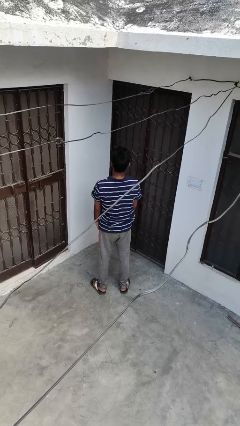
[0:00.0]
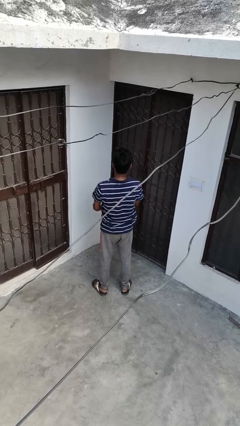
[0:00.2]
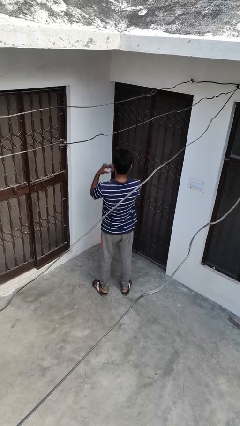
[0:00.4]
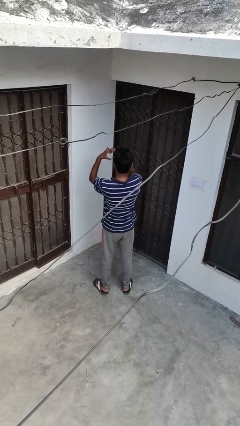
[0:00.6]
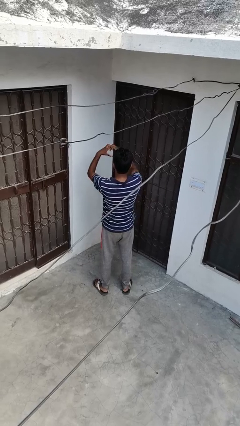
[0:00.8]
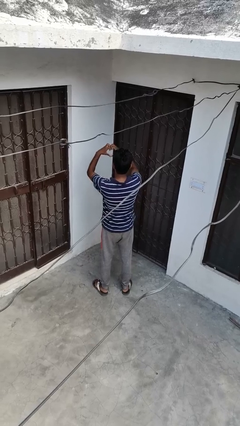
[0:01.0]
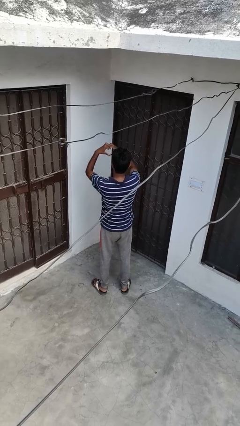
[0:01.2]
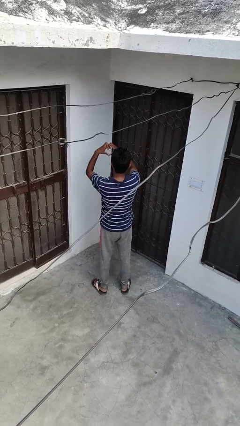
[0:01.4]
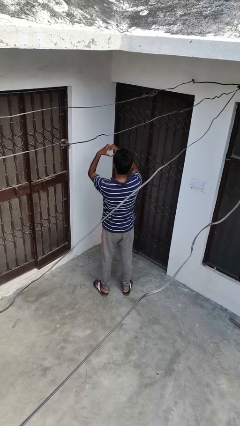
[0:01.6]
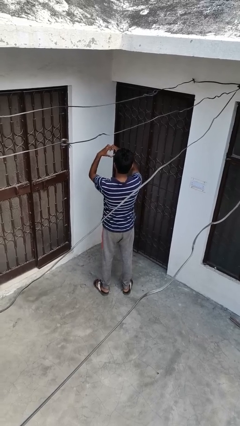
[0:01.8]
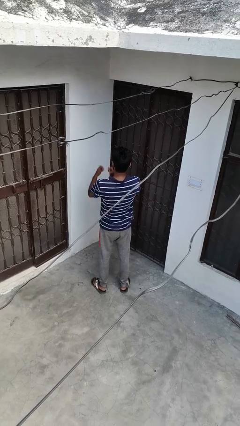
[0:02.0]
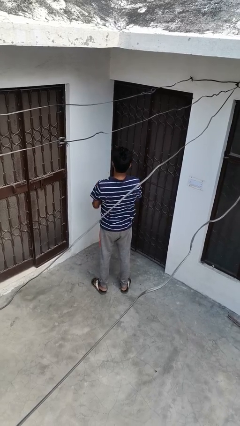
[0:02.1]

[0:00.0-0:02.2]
person gestures heart

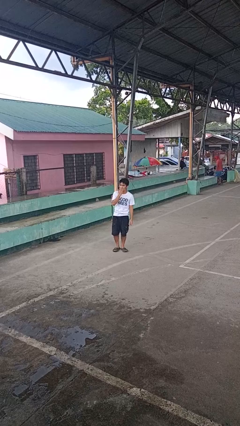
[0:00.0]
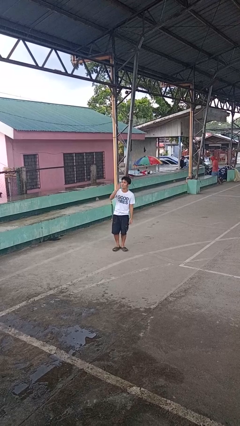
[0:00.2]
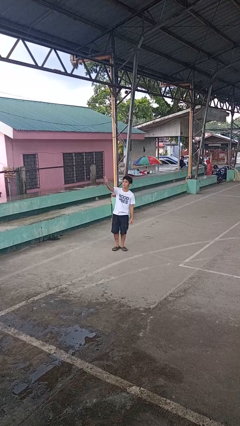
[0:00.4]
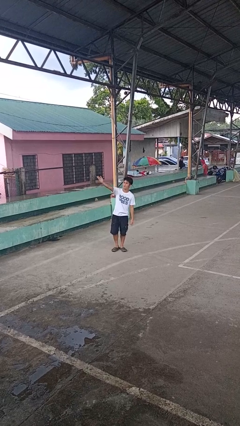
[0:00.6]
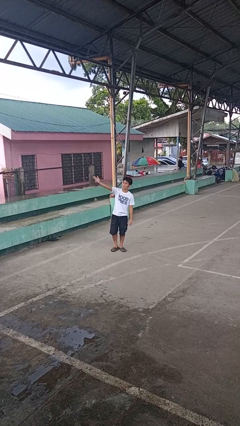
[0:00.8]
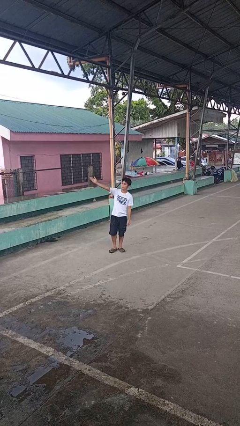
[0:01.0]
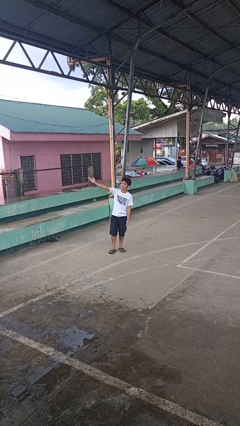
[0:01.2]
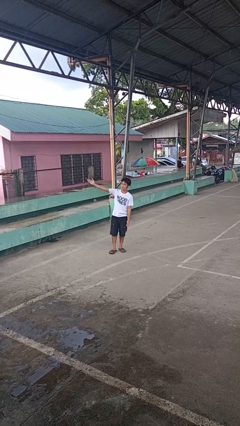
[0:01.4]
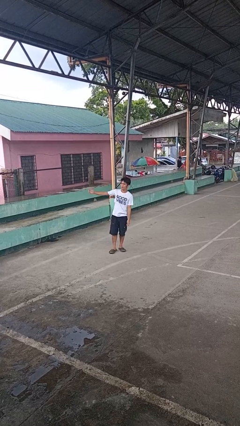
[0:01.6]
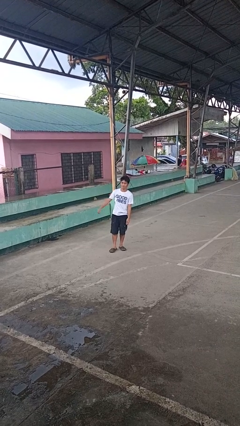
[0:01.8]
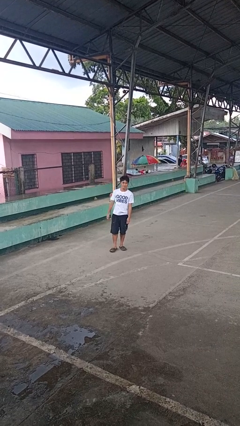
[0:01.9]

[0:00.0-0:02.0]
person gestures blow kiss

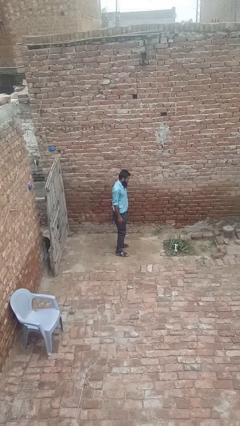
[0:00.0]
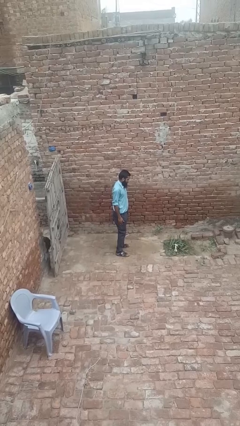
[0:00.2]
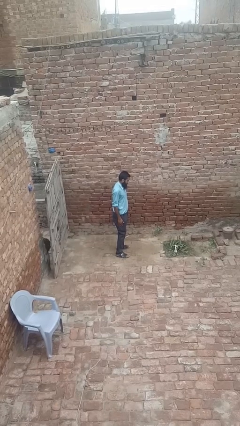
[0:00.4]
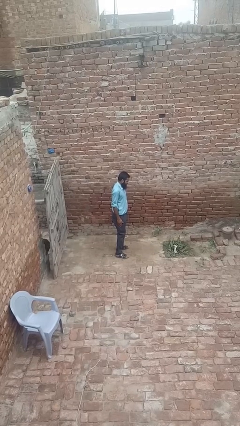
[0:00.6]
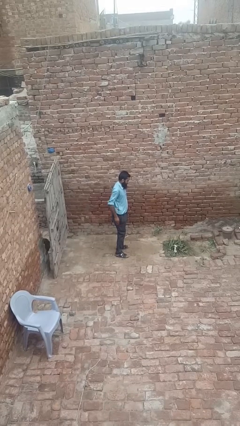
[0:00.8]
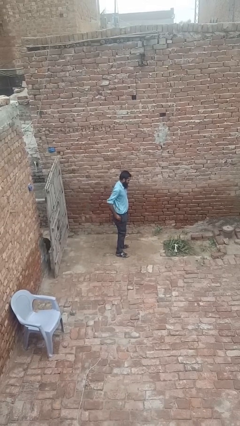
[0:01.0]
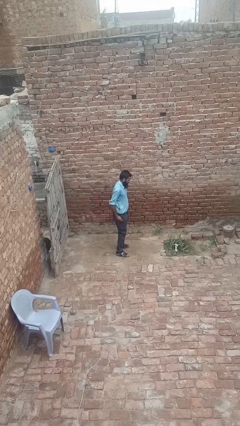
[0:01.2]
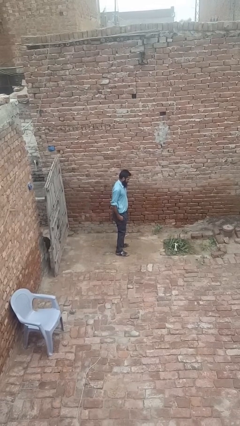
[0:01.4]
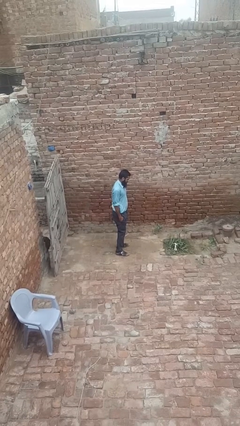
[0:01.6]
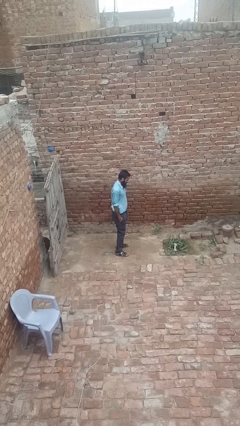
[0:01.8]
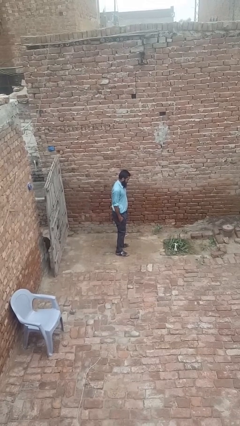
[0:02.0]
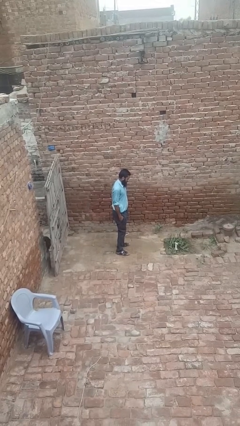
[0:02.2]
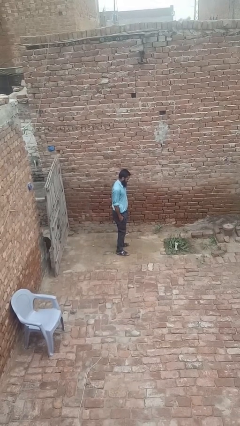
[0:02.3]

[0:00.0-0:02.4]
person puts hands in back pockets

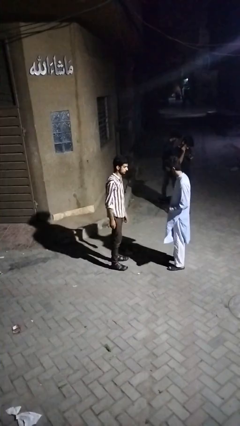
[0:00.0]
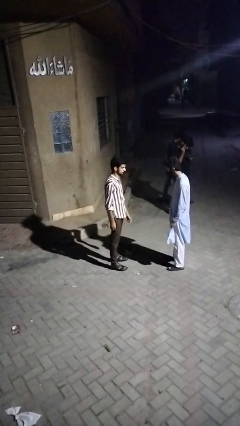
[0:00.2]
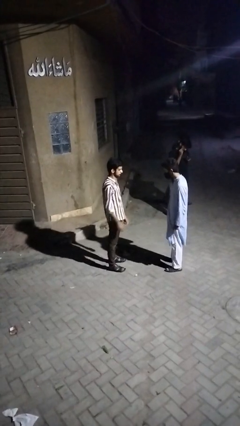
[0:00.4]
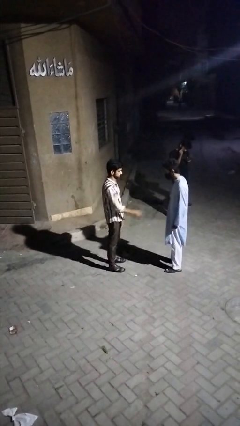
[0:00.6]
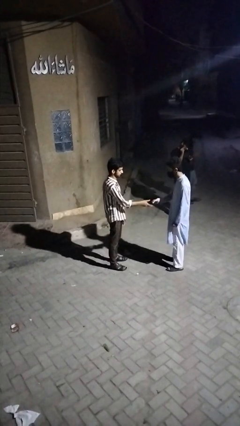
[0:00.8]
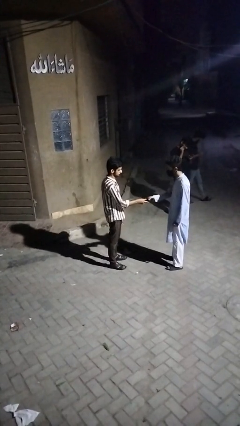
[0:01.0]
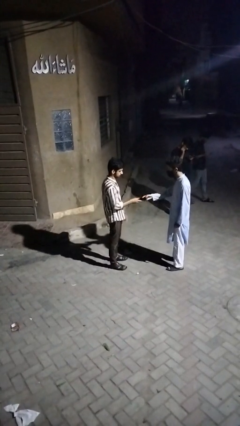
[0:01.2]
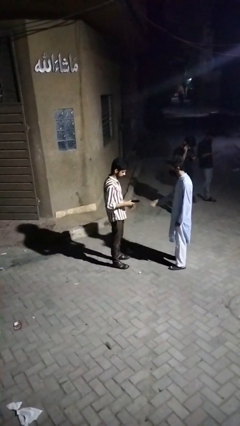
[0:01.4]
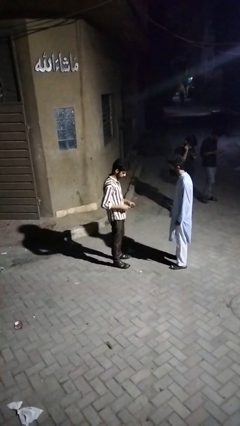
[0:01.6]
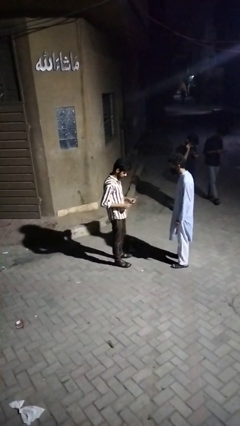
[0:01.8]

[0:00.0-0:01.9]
person transfers object to person

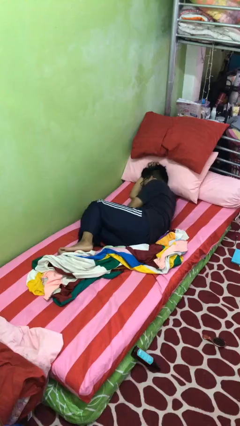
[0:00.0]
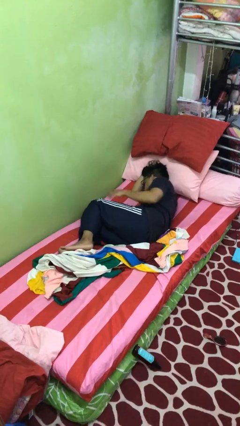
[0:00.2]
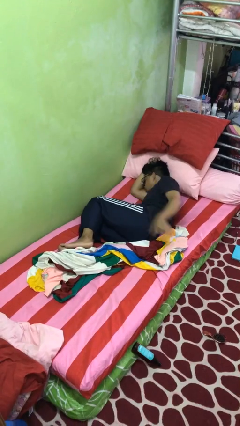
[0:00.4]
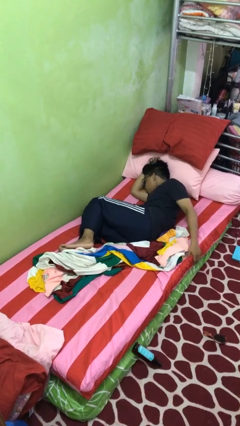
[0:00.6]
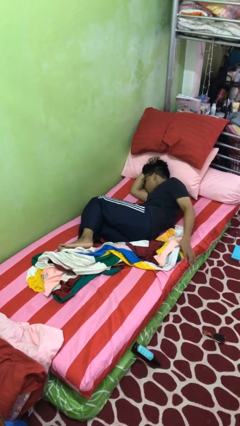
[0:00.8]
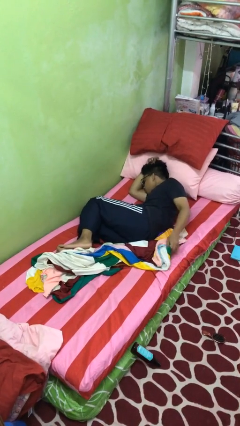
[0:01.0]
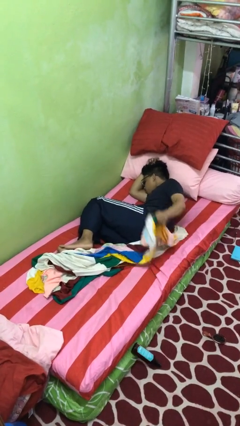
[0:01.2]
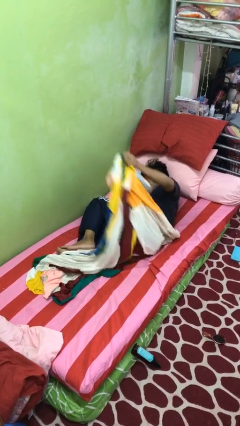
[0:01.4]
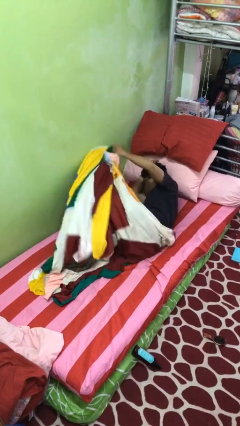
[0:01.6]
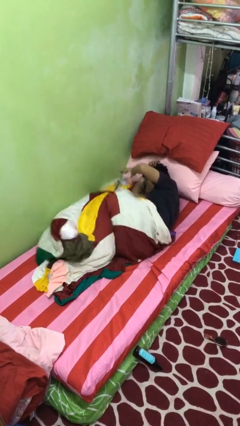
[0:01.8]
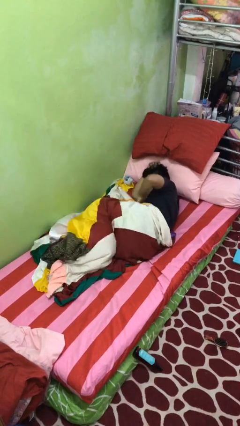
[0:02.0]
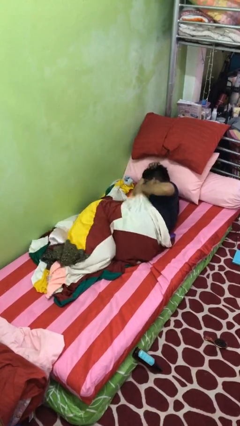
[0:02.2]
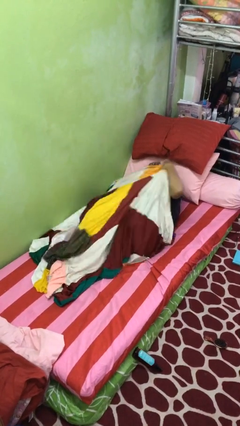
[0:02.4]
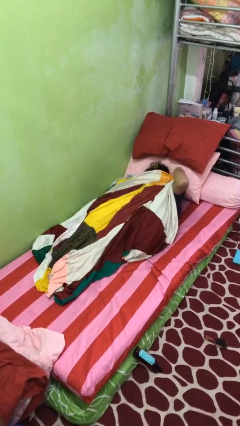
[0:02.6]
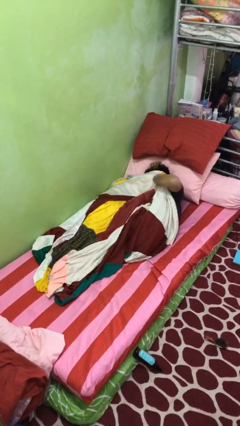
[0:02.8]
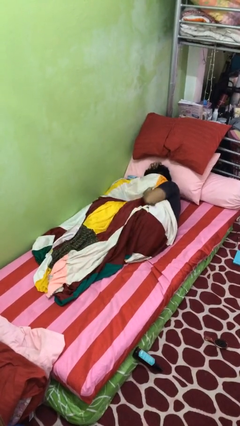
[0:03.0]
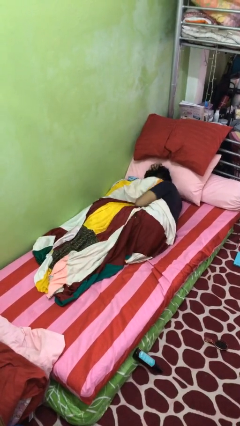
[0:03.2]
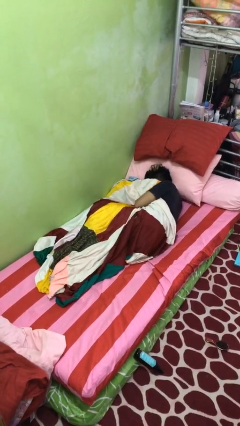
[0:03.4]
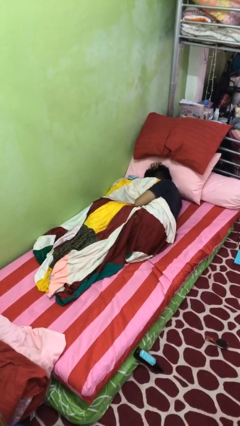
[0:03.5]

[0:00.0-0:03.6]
person covers with blanket

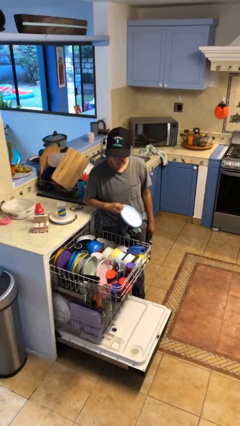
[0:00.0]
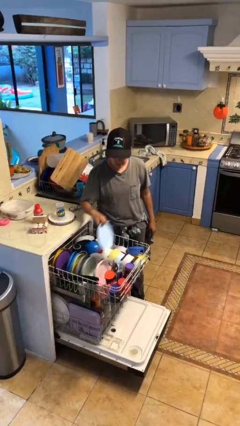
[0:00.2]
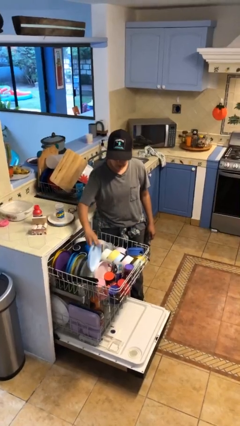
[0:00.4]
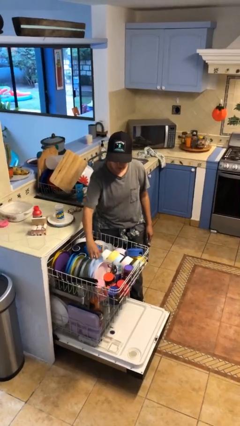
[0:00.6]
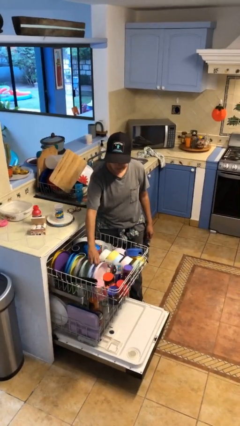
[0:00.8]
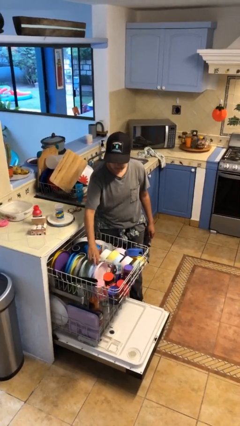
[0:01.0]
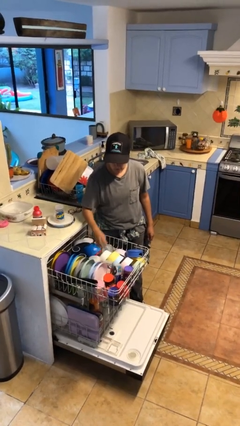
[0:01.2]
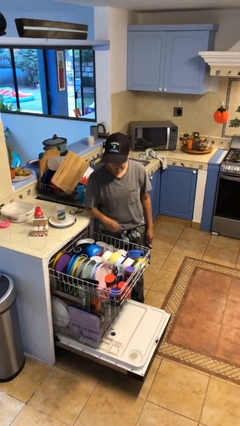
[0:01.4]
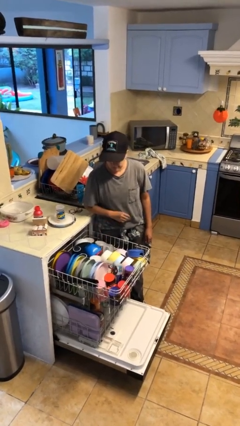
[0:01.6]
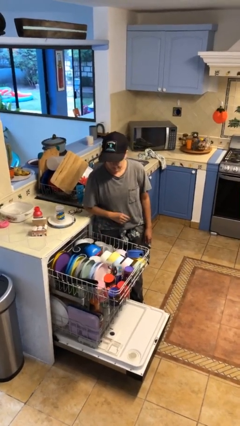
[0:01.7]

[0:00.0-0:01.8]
person loads dishwasher

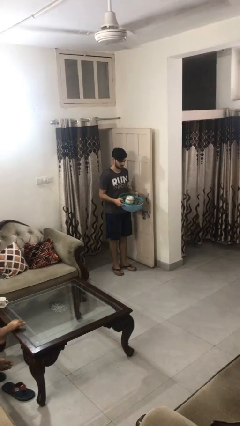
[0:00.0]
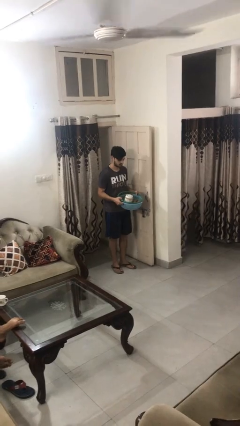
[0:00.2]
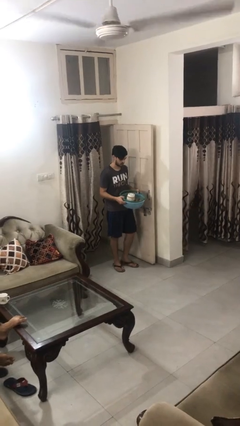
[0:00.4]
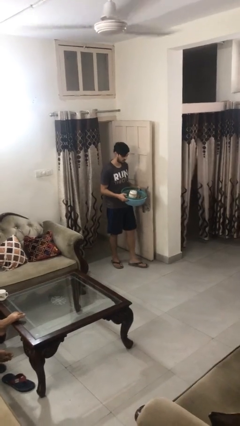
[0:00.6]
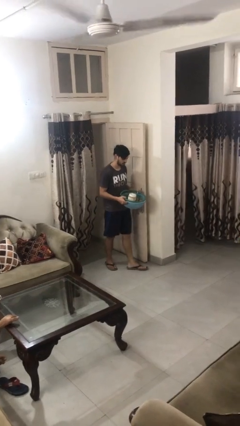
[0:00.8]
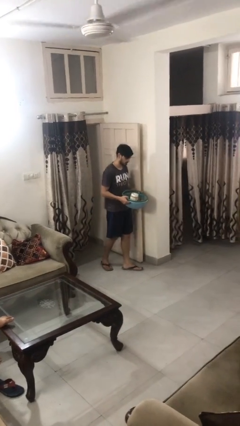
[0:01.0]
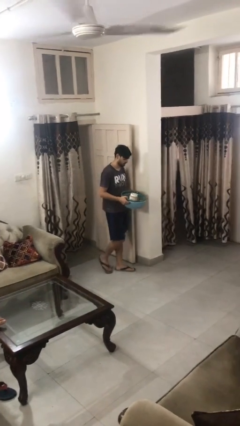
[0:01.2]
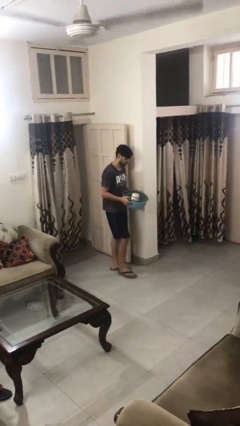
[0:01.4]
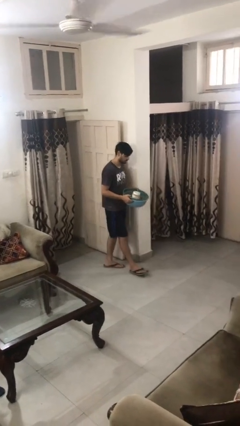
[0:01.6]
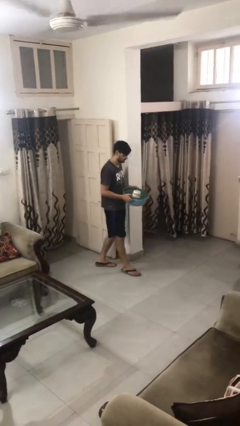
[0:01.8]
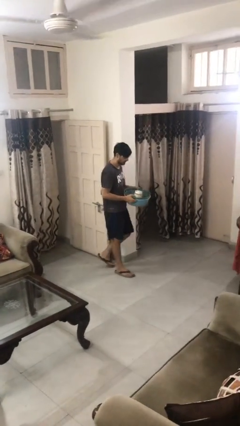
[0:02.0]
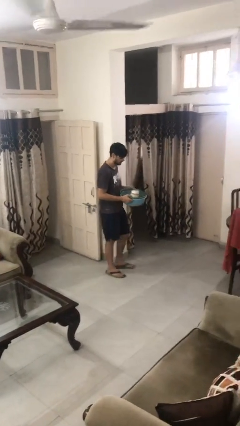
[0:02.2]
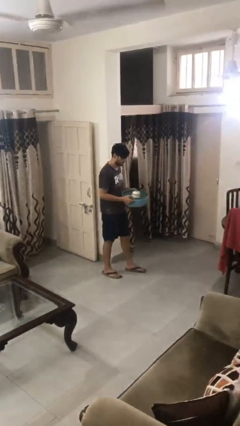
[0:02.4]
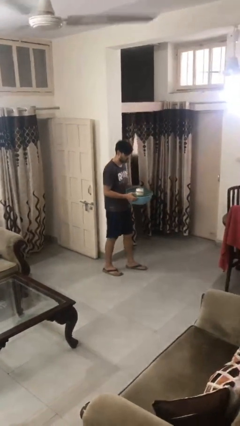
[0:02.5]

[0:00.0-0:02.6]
person carries groceries

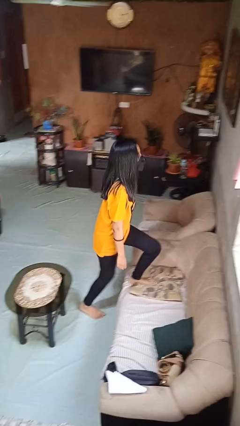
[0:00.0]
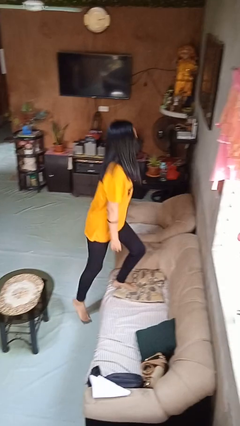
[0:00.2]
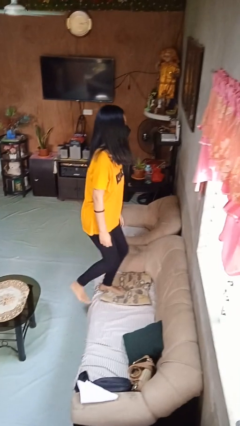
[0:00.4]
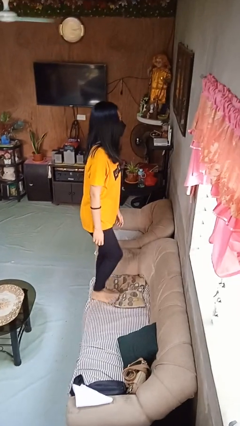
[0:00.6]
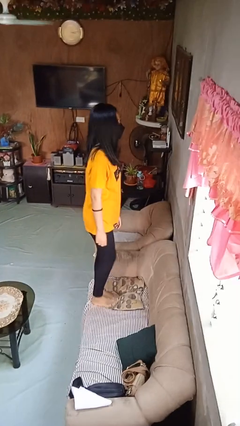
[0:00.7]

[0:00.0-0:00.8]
person climbs on couch
